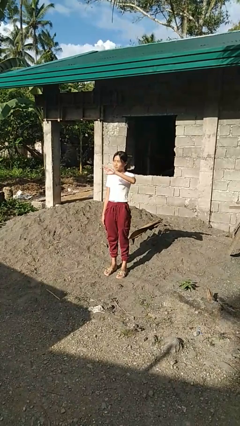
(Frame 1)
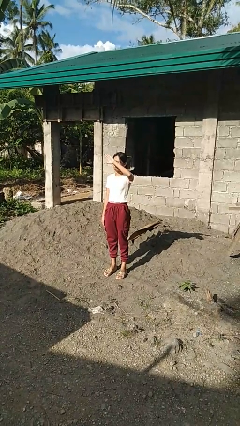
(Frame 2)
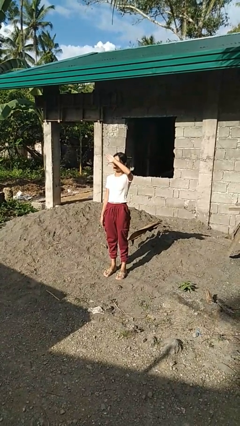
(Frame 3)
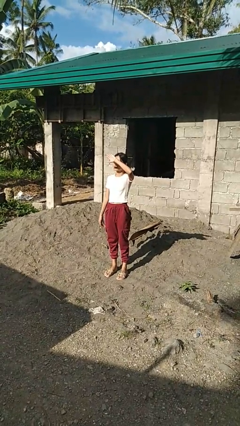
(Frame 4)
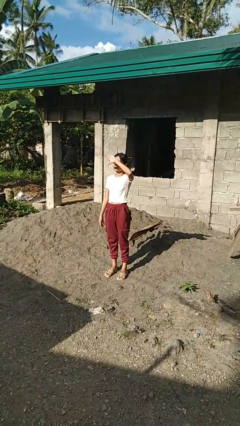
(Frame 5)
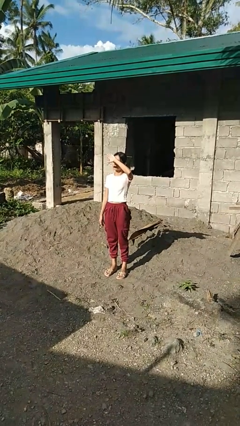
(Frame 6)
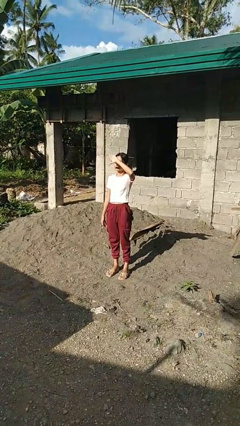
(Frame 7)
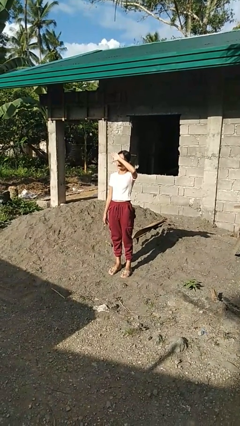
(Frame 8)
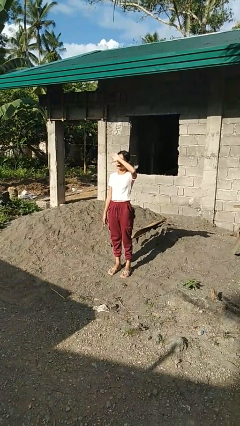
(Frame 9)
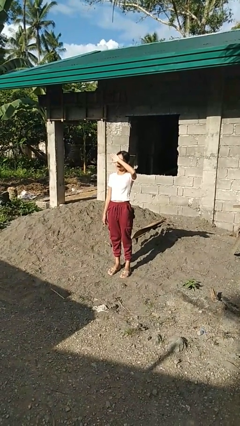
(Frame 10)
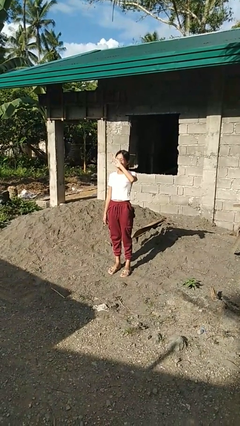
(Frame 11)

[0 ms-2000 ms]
person shades eyes

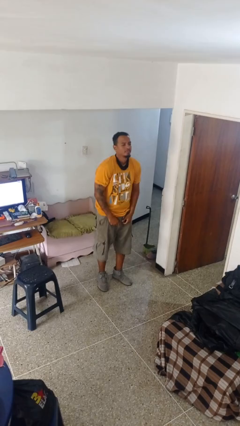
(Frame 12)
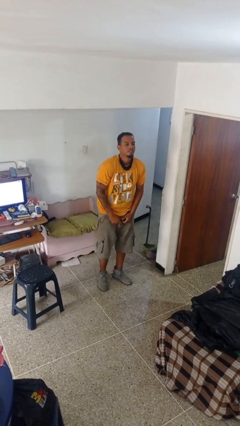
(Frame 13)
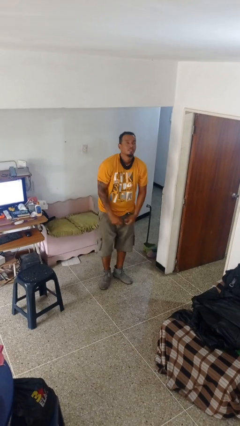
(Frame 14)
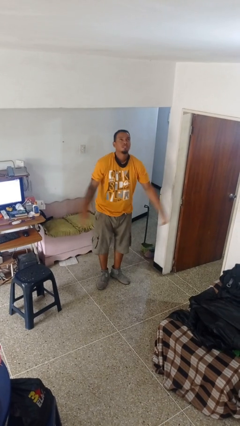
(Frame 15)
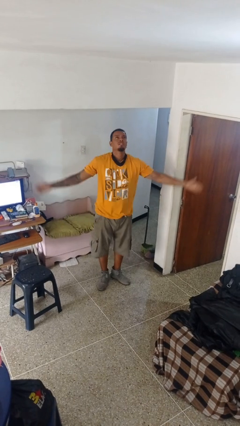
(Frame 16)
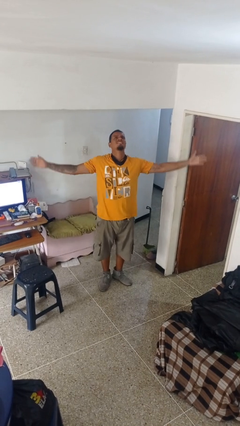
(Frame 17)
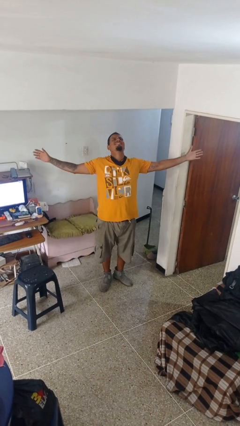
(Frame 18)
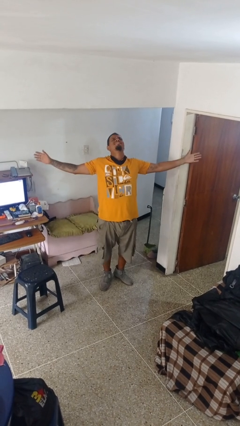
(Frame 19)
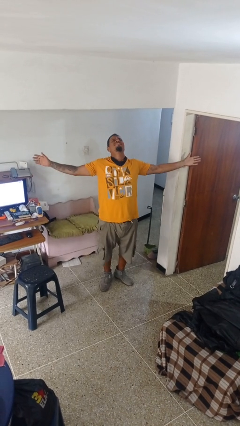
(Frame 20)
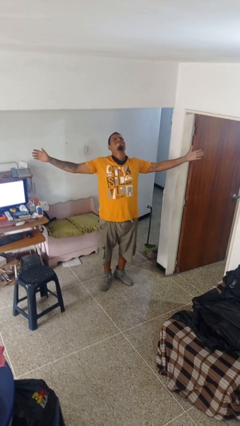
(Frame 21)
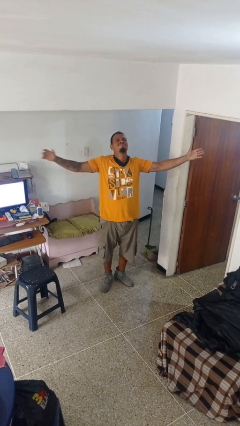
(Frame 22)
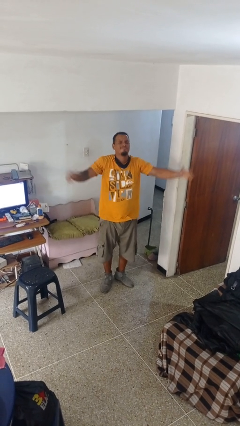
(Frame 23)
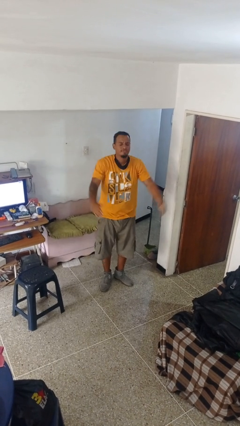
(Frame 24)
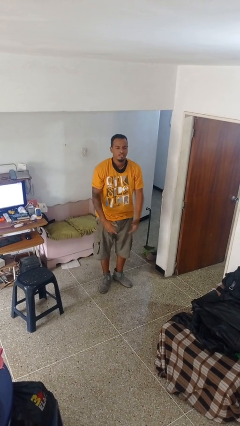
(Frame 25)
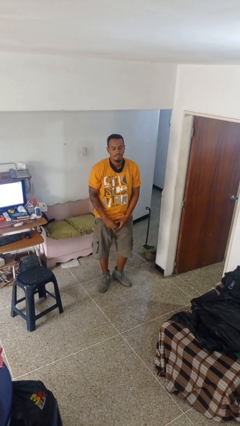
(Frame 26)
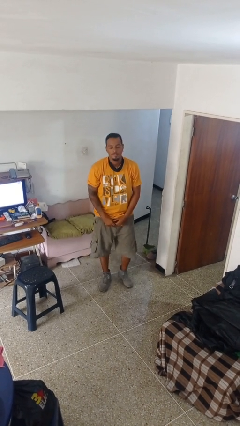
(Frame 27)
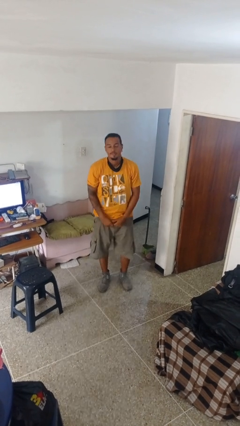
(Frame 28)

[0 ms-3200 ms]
person stretches arms to side

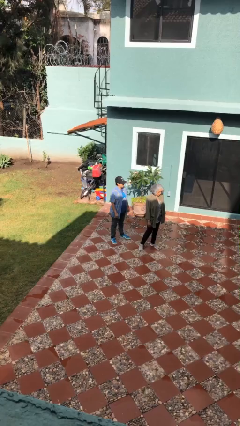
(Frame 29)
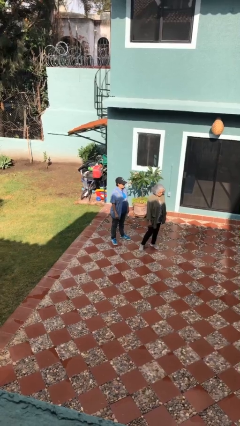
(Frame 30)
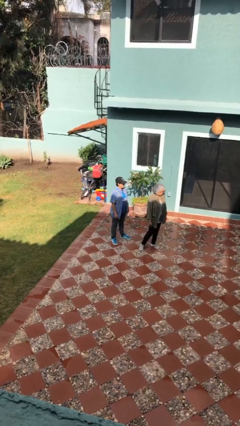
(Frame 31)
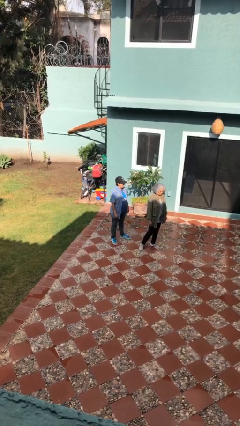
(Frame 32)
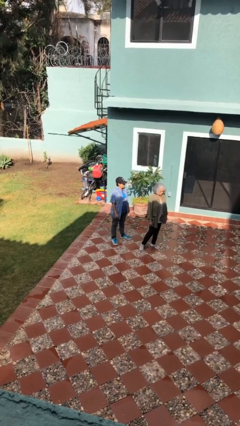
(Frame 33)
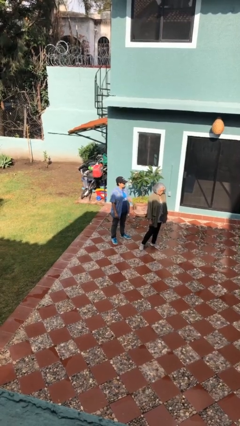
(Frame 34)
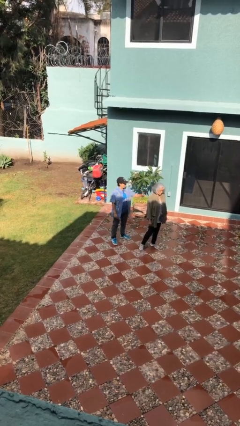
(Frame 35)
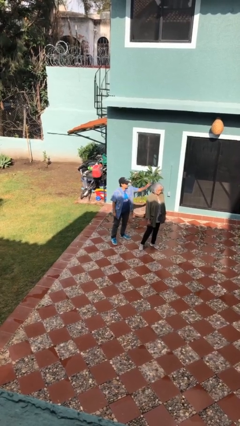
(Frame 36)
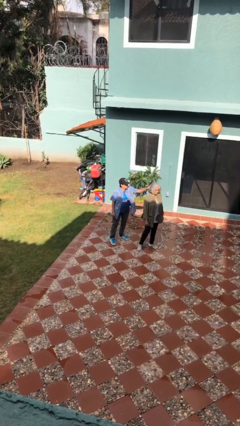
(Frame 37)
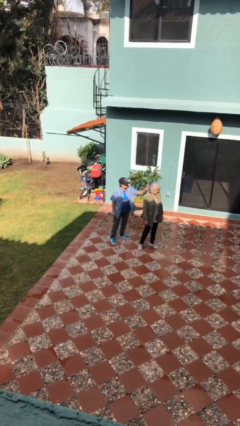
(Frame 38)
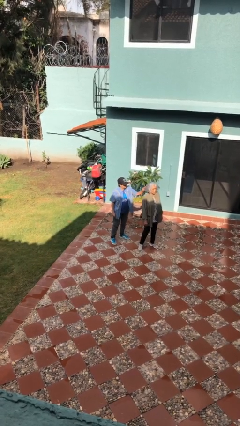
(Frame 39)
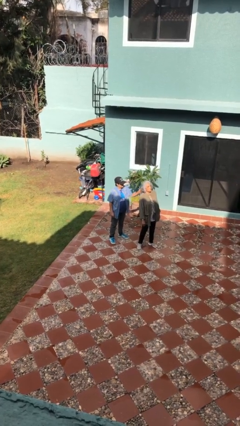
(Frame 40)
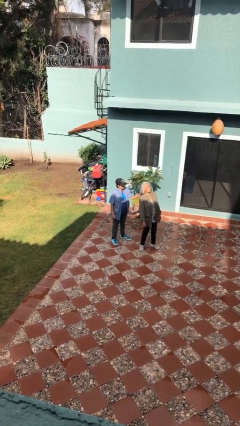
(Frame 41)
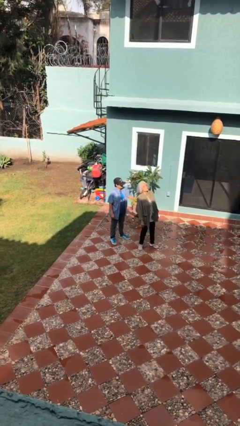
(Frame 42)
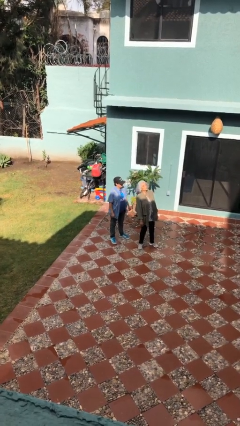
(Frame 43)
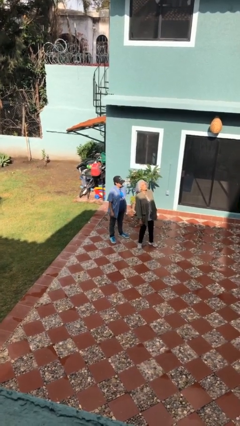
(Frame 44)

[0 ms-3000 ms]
person grabs person by hair

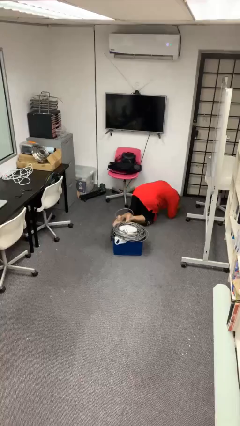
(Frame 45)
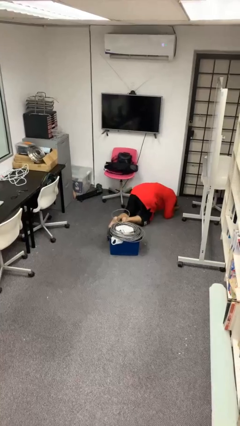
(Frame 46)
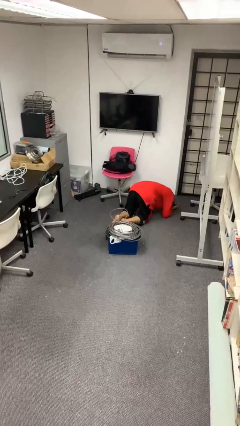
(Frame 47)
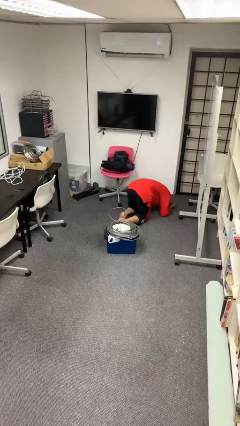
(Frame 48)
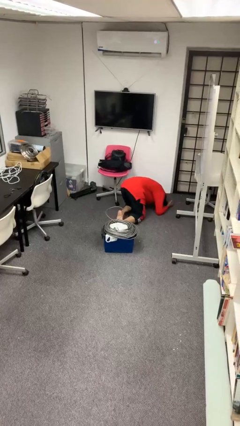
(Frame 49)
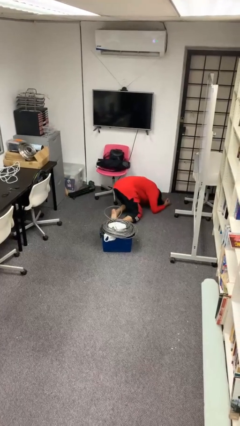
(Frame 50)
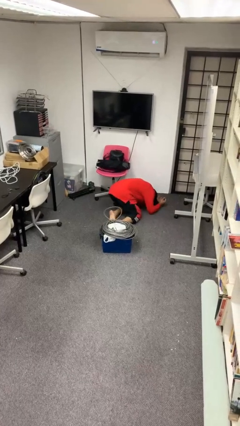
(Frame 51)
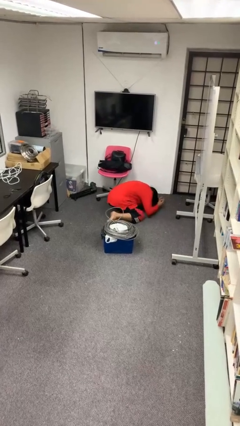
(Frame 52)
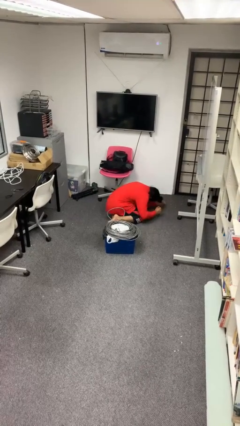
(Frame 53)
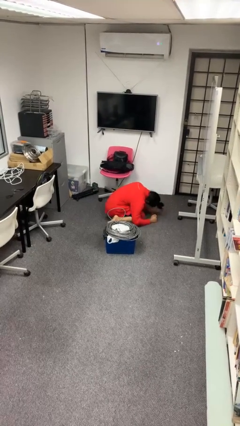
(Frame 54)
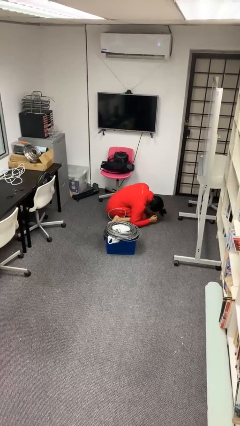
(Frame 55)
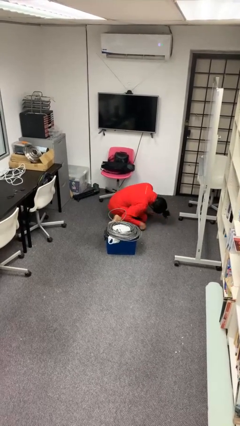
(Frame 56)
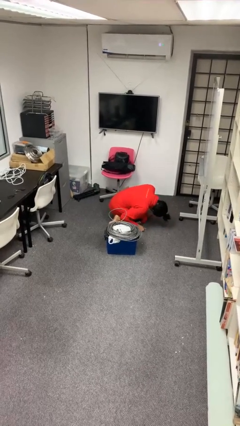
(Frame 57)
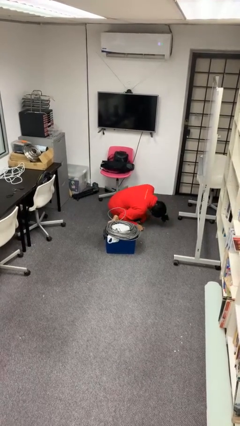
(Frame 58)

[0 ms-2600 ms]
person lies down on floor

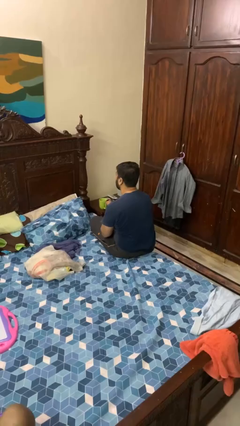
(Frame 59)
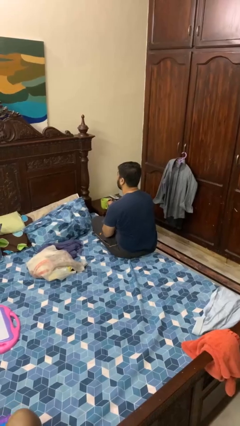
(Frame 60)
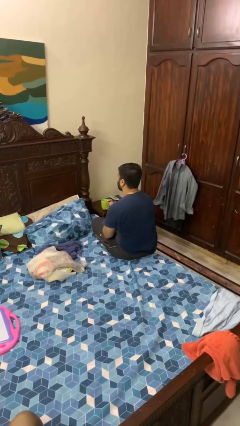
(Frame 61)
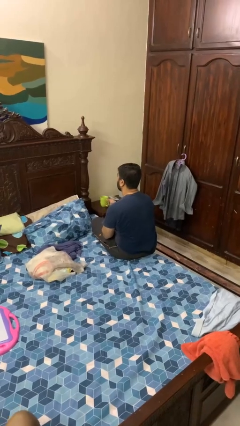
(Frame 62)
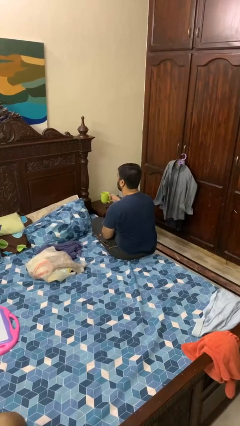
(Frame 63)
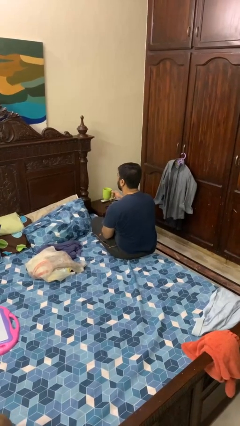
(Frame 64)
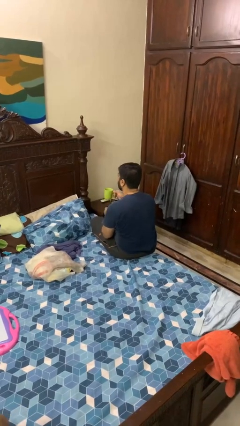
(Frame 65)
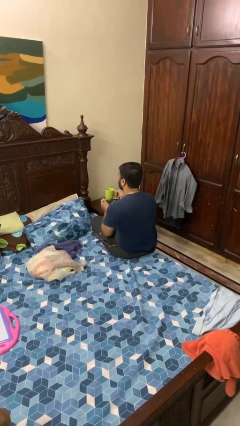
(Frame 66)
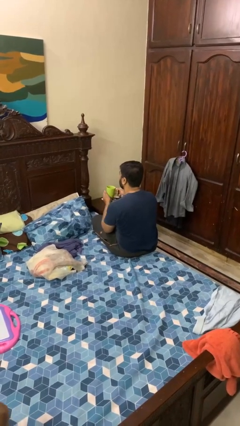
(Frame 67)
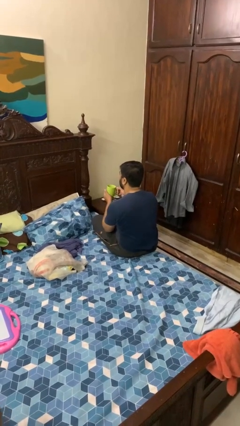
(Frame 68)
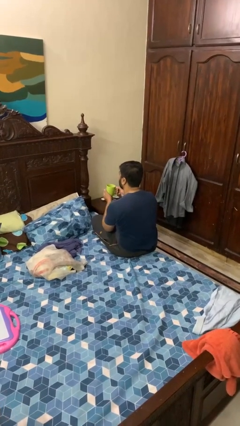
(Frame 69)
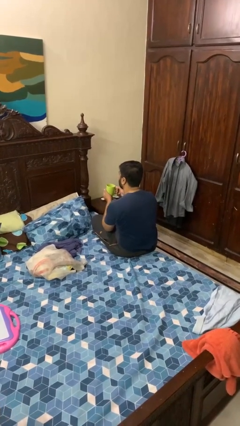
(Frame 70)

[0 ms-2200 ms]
person picks up object from table

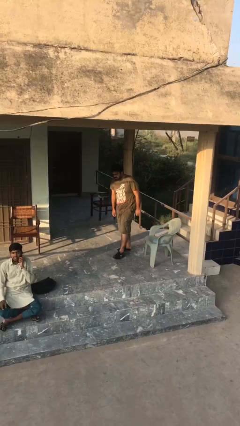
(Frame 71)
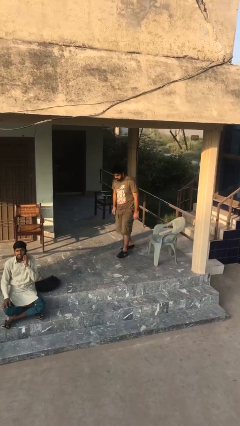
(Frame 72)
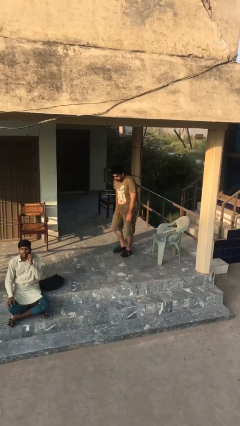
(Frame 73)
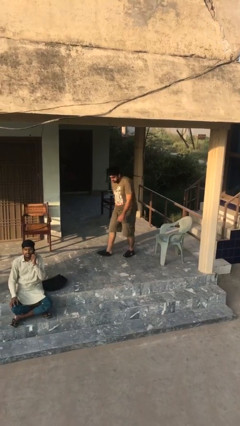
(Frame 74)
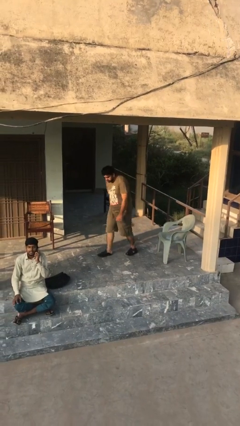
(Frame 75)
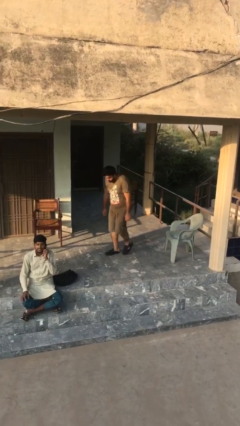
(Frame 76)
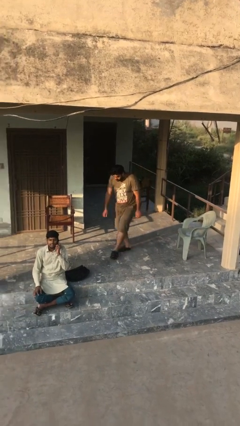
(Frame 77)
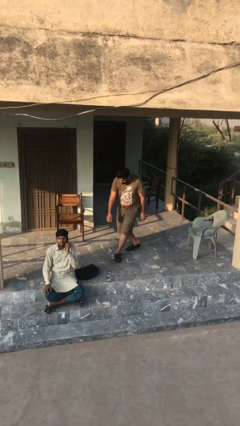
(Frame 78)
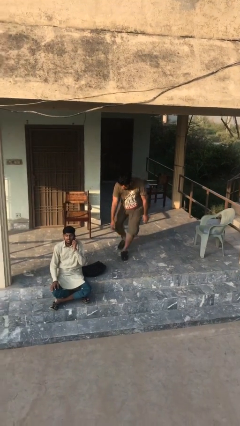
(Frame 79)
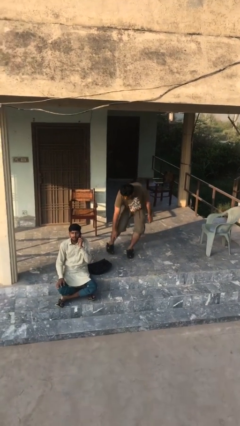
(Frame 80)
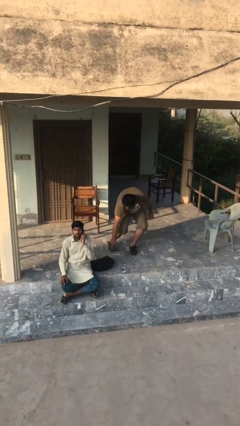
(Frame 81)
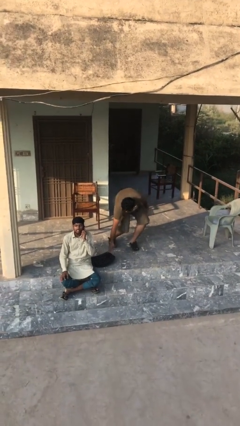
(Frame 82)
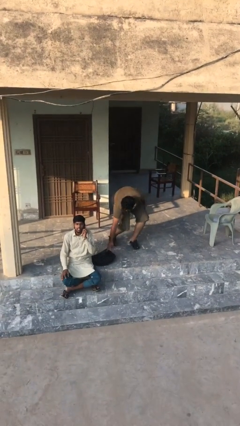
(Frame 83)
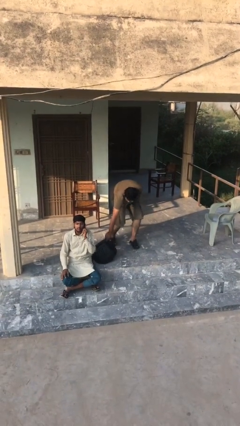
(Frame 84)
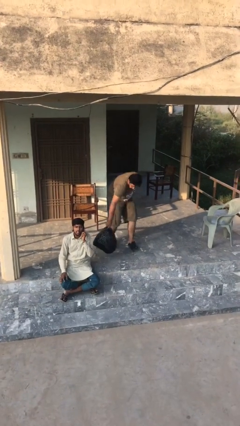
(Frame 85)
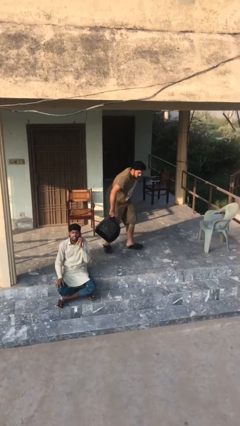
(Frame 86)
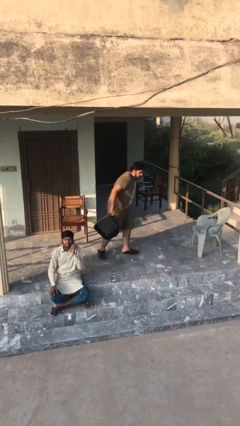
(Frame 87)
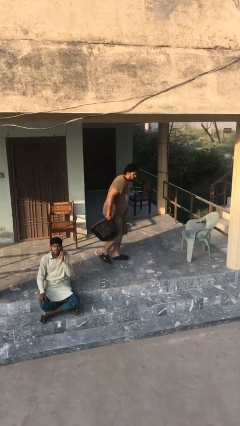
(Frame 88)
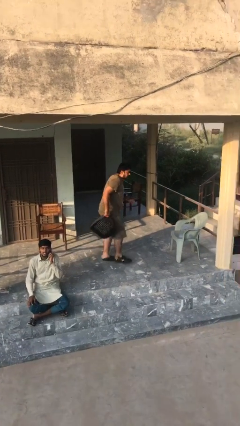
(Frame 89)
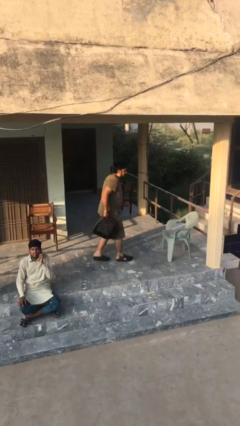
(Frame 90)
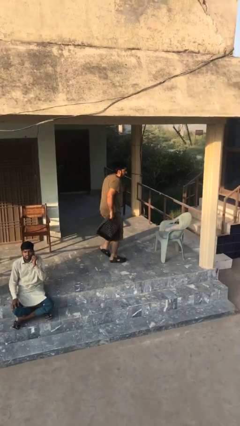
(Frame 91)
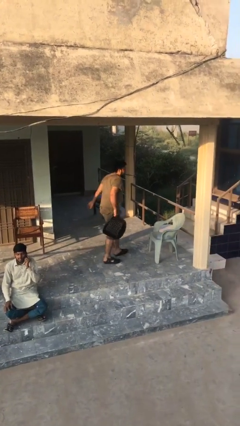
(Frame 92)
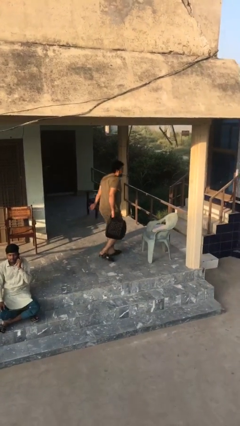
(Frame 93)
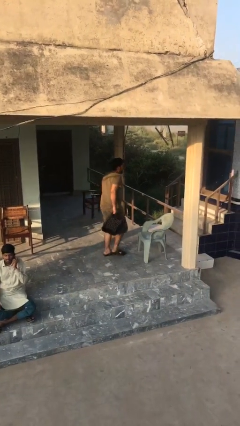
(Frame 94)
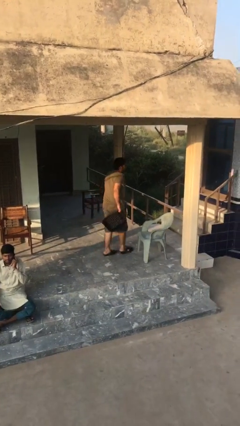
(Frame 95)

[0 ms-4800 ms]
person steals object from person
